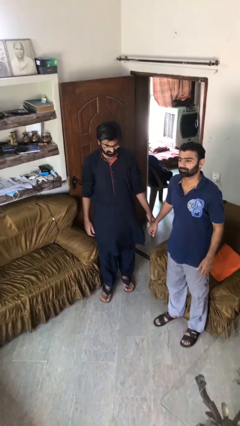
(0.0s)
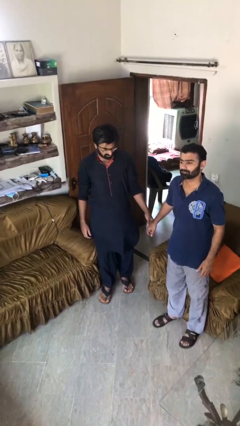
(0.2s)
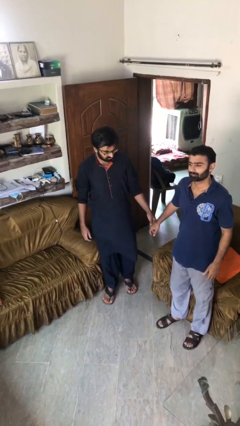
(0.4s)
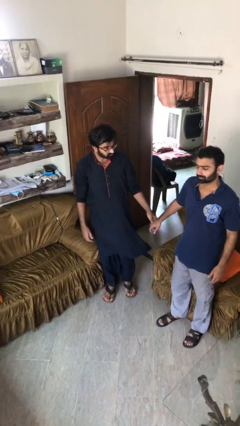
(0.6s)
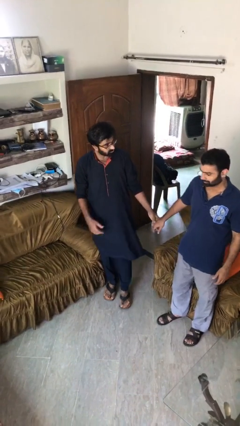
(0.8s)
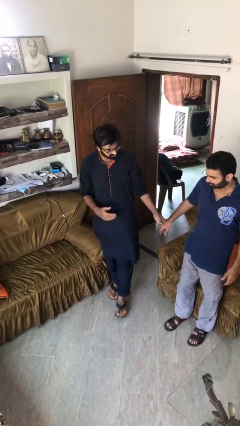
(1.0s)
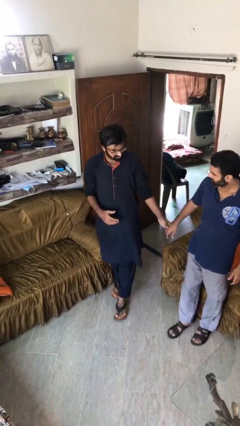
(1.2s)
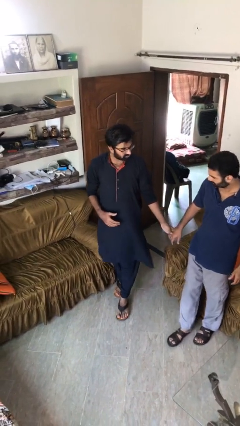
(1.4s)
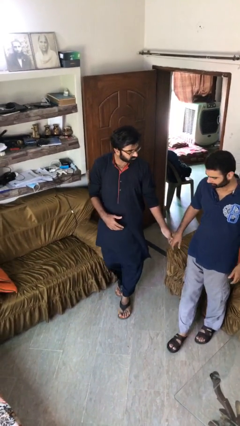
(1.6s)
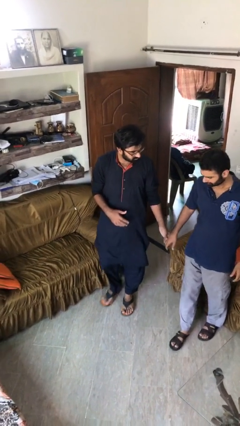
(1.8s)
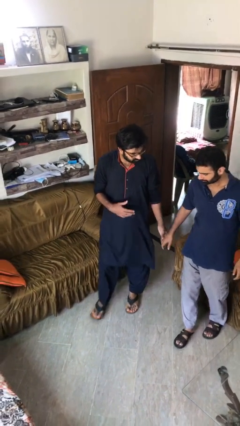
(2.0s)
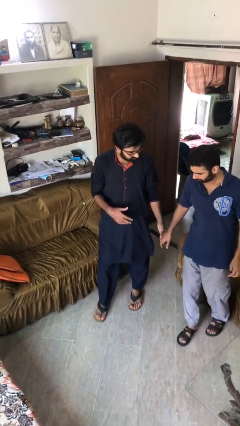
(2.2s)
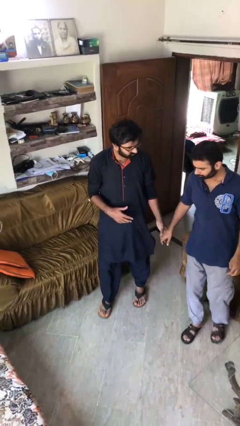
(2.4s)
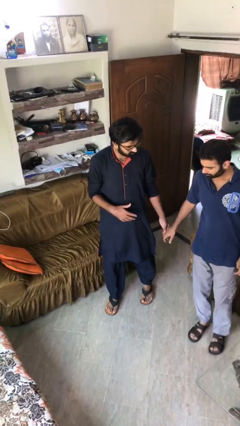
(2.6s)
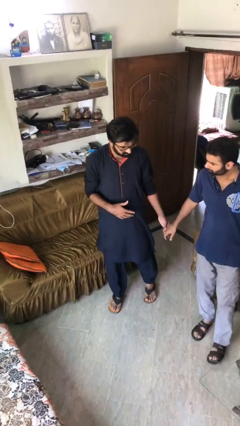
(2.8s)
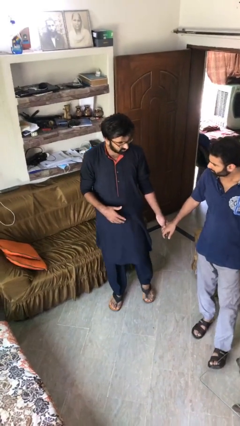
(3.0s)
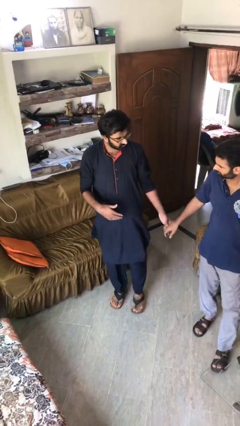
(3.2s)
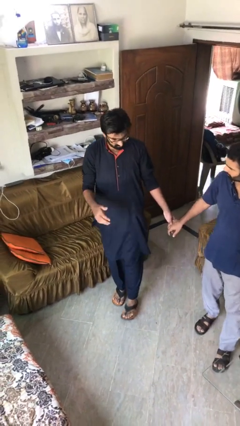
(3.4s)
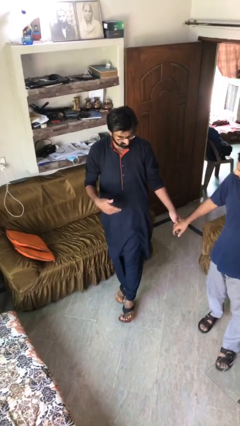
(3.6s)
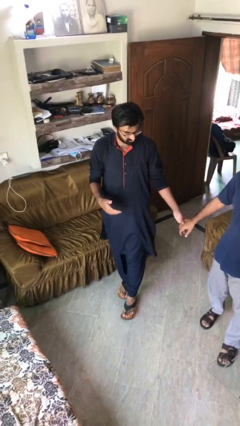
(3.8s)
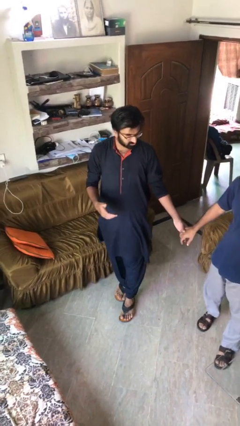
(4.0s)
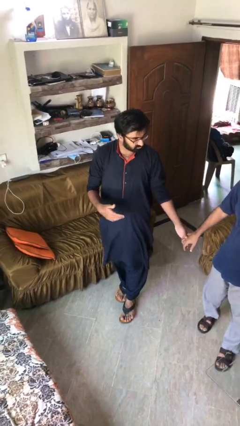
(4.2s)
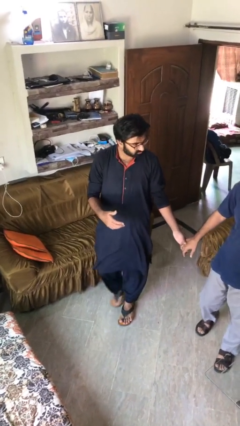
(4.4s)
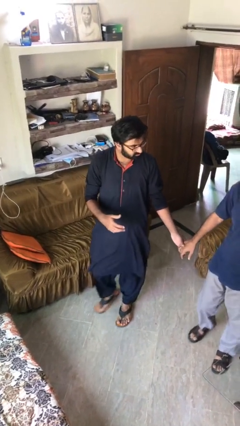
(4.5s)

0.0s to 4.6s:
person holds hand

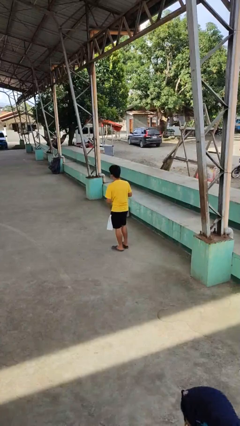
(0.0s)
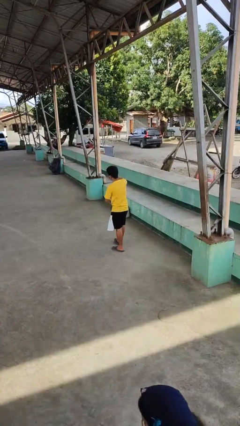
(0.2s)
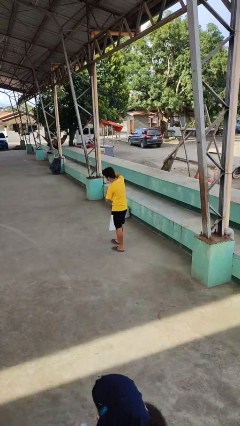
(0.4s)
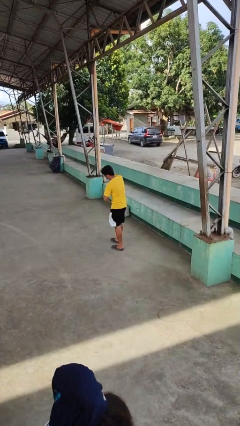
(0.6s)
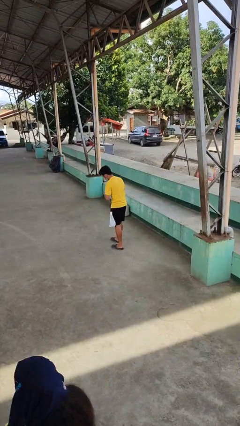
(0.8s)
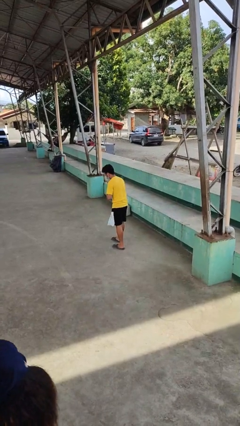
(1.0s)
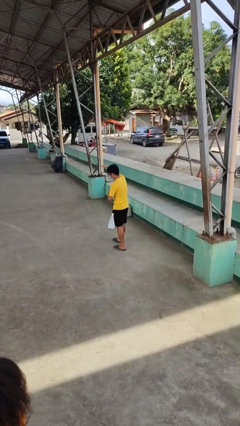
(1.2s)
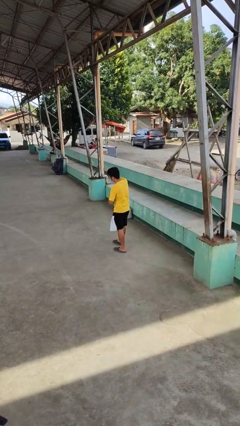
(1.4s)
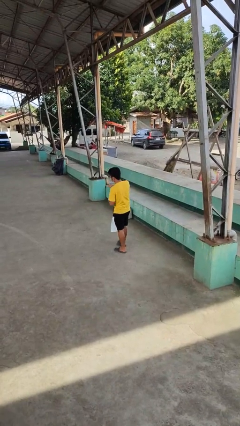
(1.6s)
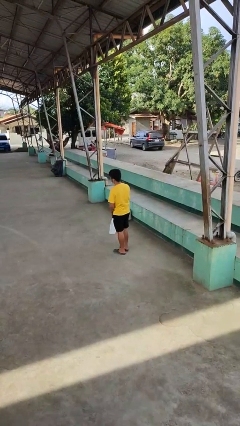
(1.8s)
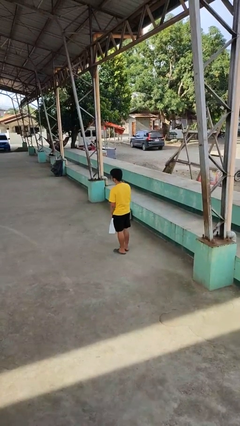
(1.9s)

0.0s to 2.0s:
person punches

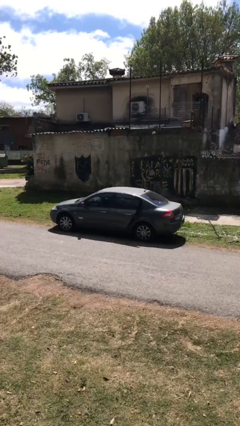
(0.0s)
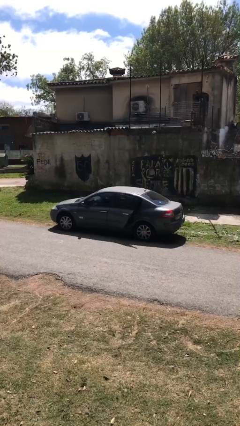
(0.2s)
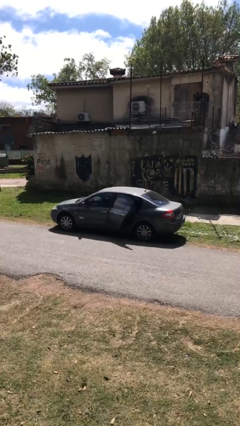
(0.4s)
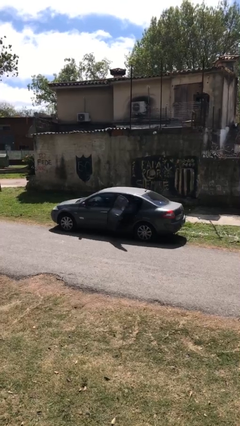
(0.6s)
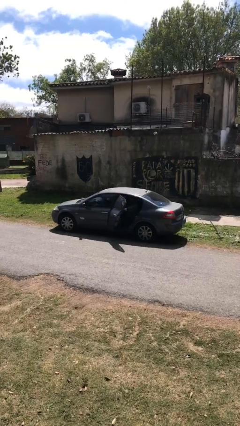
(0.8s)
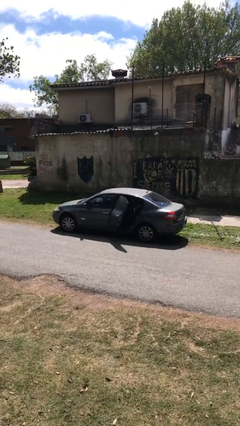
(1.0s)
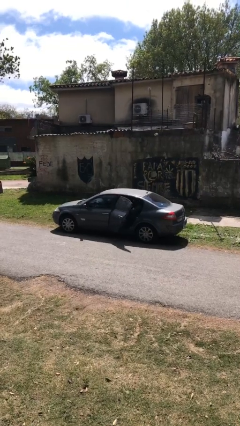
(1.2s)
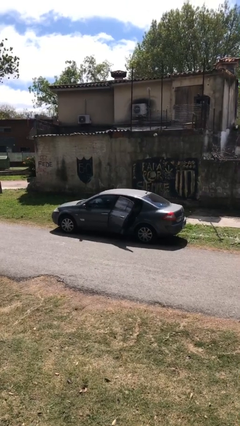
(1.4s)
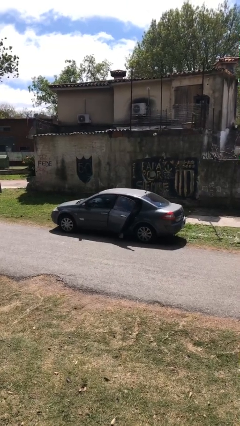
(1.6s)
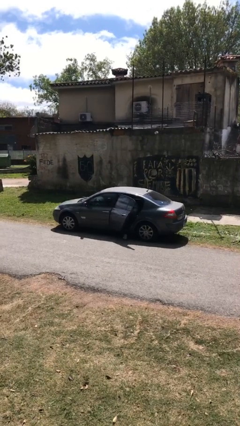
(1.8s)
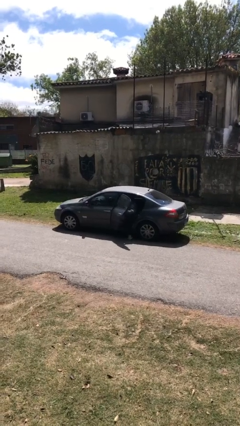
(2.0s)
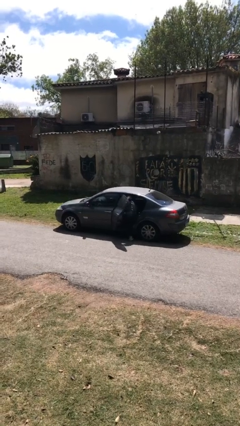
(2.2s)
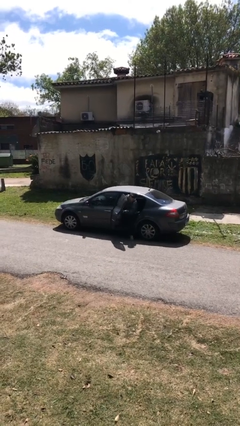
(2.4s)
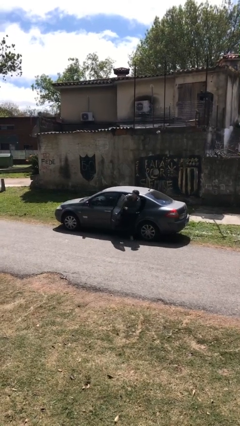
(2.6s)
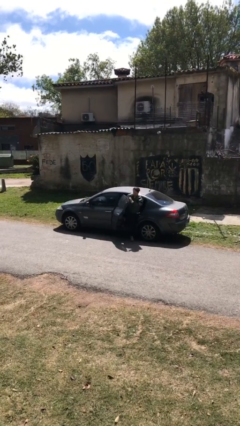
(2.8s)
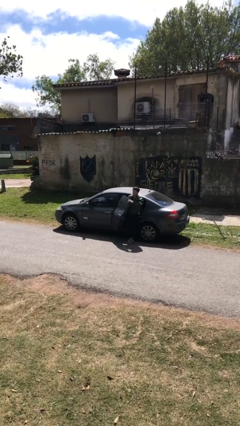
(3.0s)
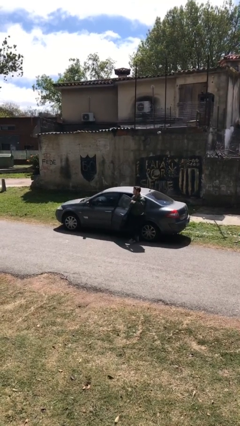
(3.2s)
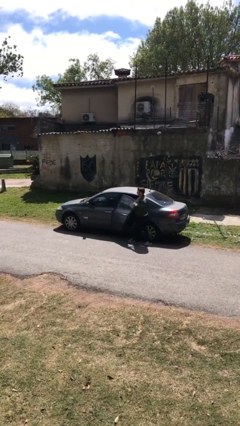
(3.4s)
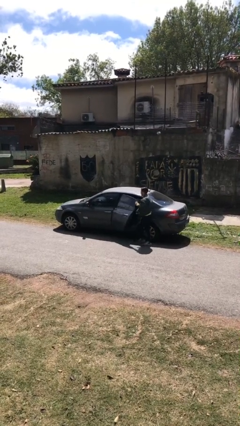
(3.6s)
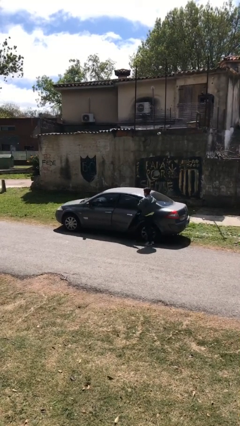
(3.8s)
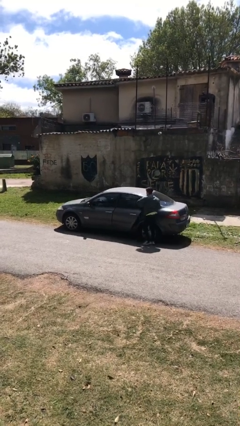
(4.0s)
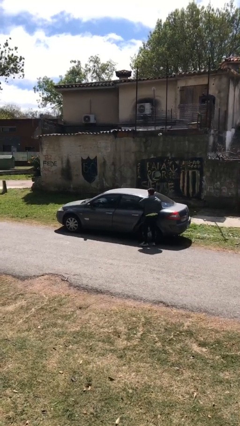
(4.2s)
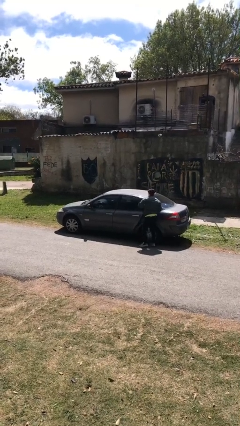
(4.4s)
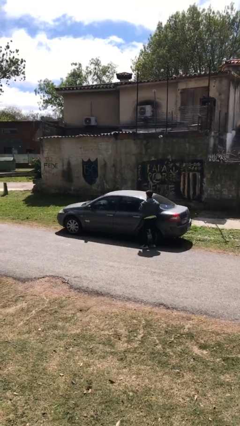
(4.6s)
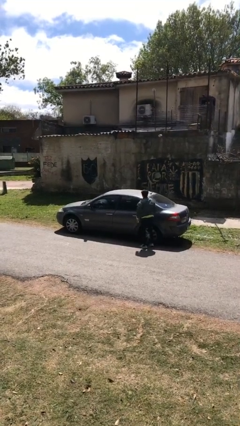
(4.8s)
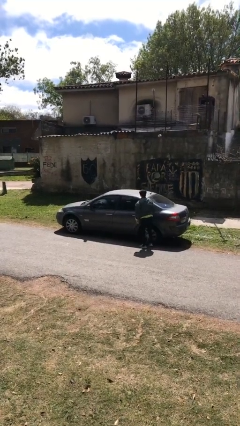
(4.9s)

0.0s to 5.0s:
car drops off person

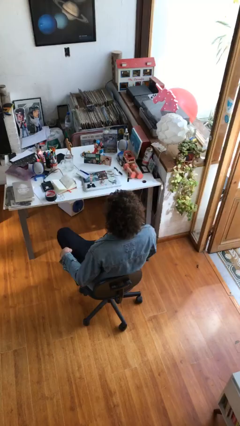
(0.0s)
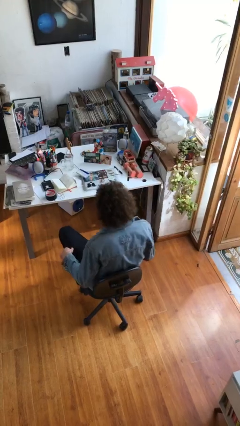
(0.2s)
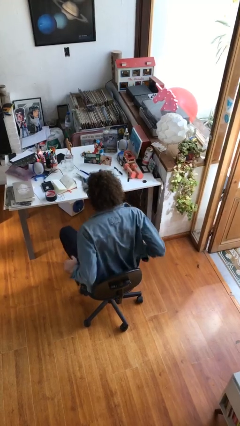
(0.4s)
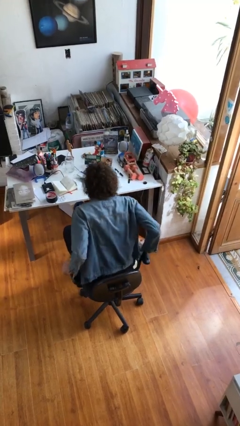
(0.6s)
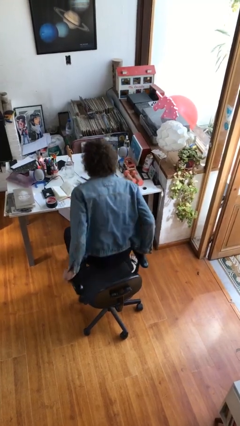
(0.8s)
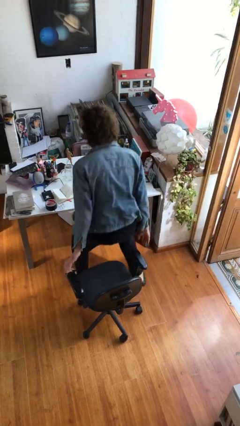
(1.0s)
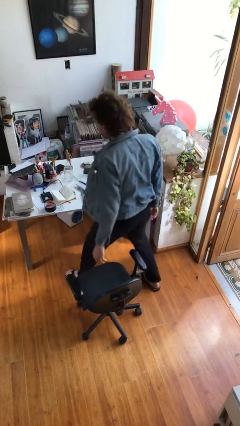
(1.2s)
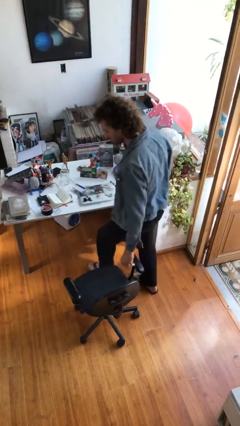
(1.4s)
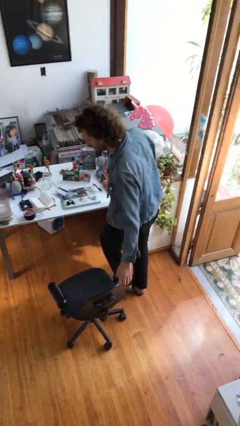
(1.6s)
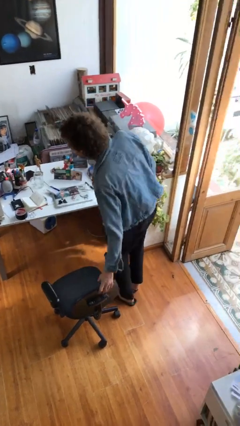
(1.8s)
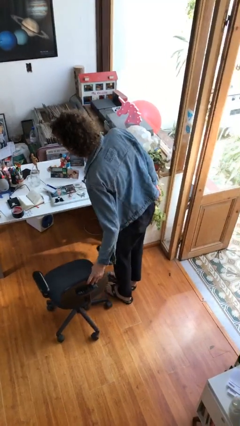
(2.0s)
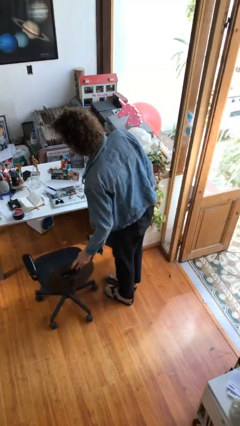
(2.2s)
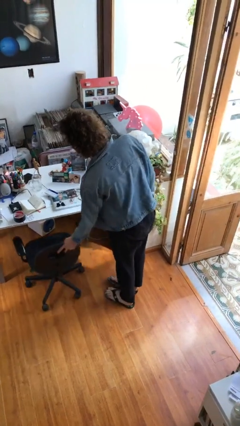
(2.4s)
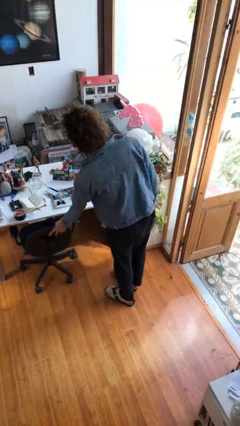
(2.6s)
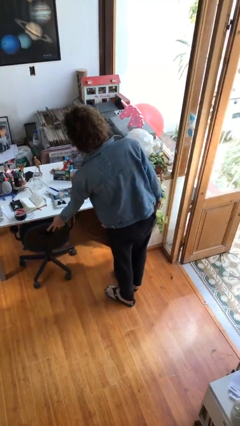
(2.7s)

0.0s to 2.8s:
person stands up

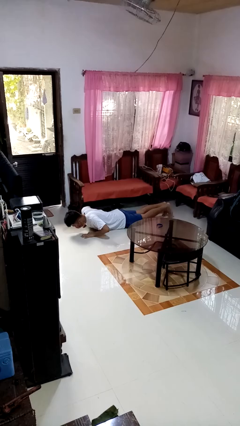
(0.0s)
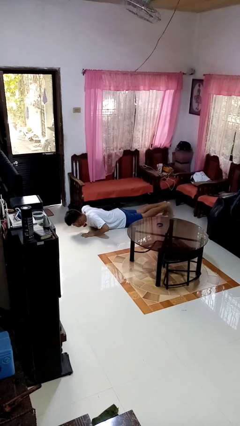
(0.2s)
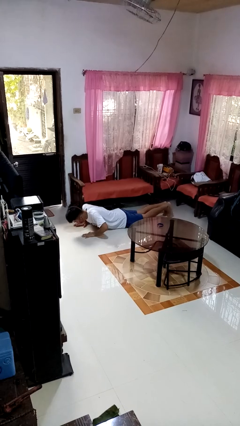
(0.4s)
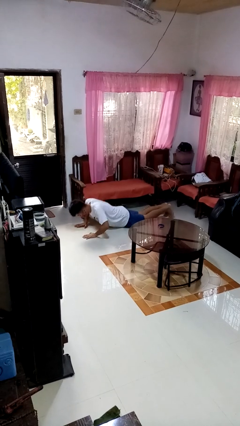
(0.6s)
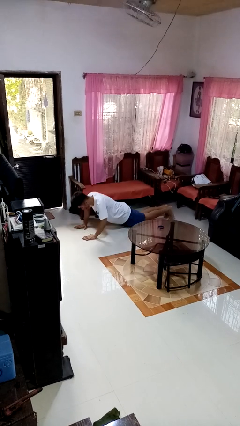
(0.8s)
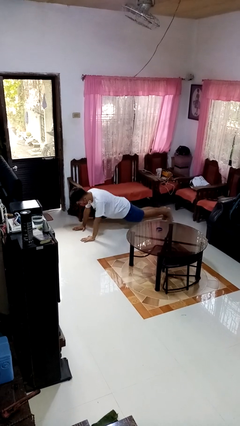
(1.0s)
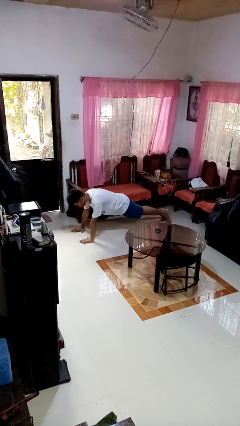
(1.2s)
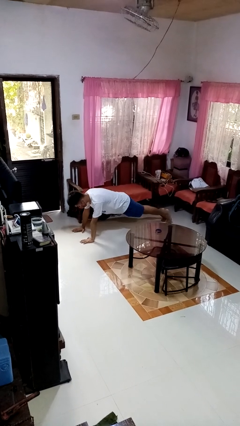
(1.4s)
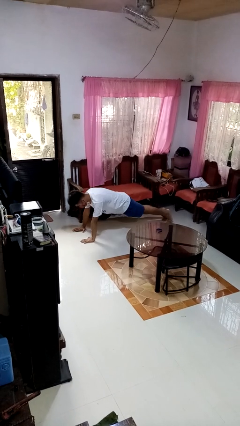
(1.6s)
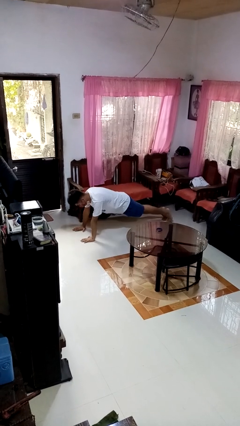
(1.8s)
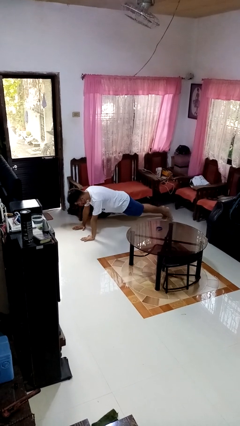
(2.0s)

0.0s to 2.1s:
person exercises with pushup

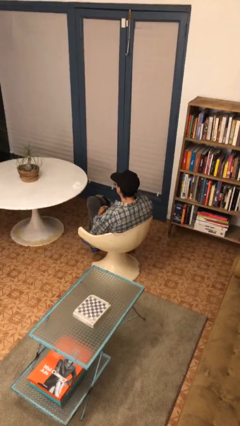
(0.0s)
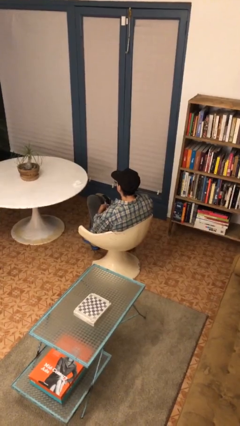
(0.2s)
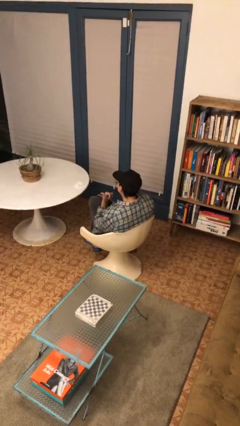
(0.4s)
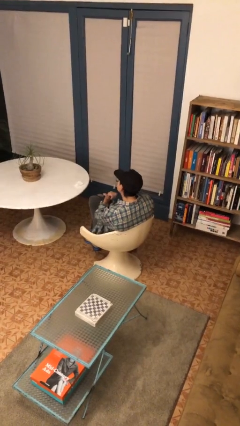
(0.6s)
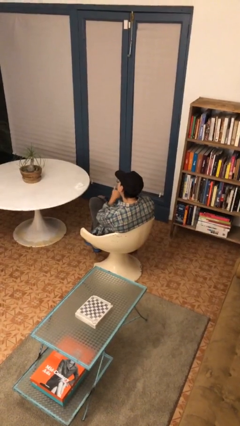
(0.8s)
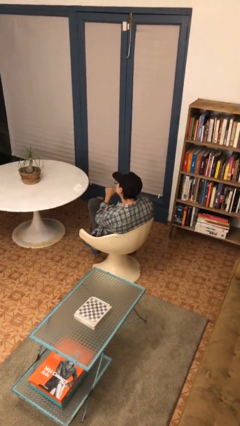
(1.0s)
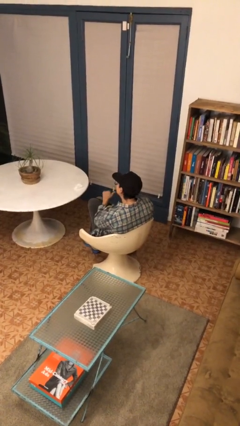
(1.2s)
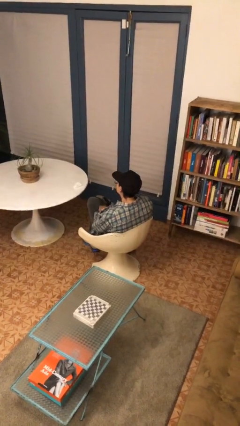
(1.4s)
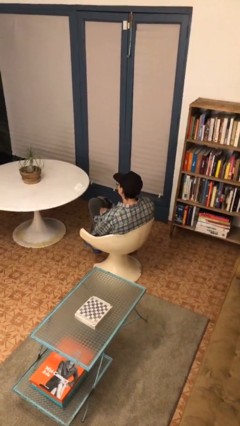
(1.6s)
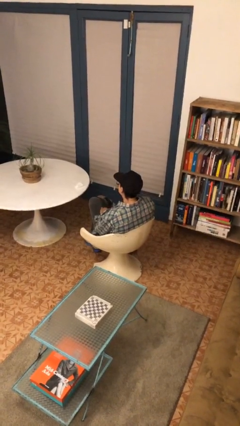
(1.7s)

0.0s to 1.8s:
person gestures cut
